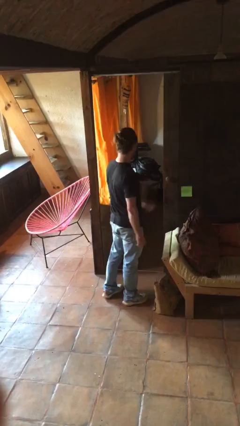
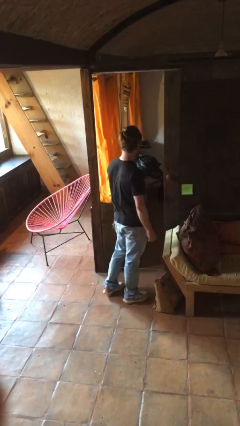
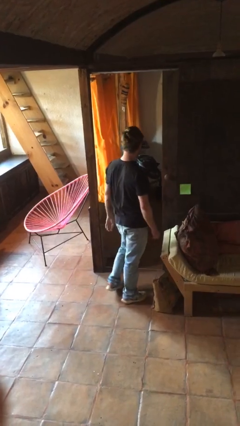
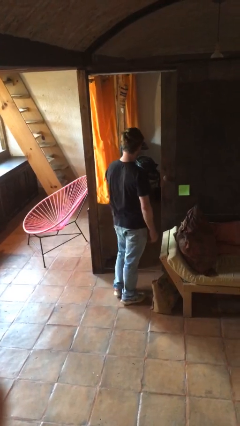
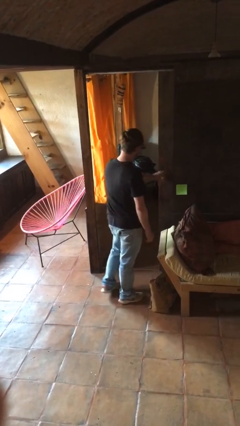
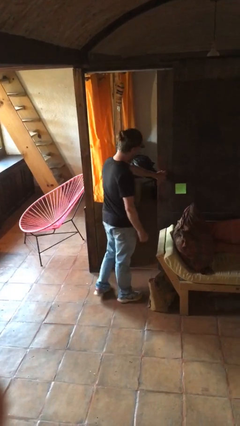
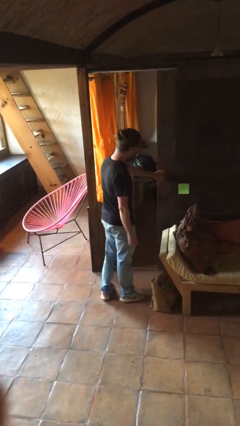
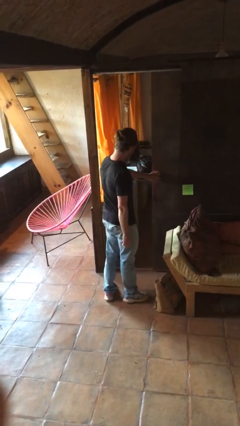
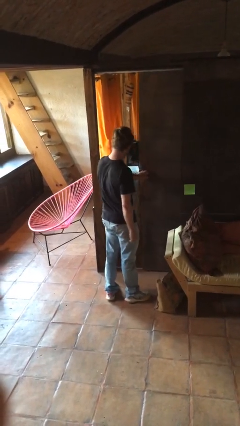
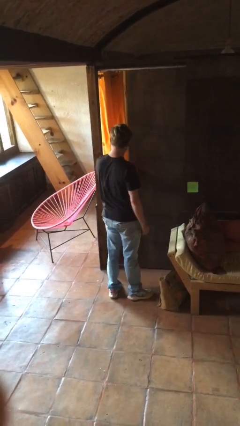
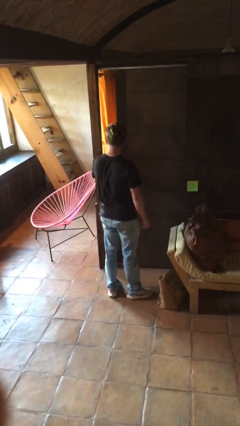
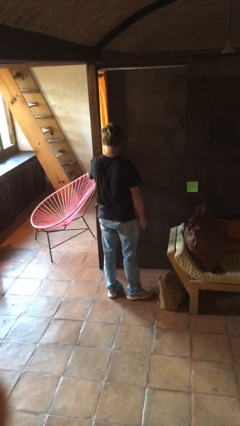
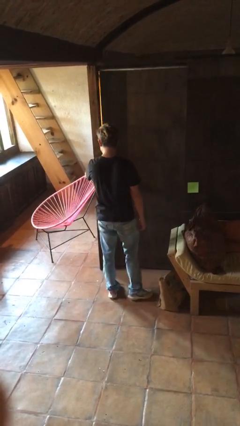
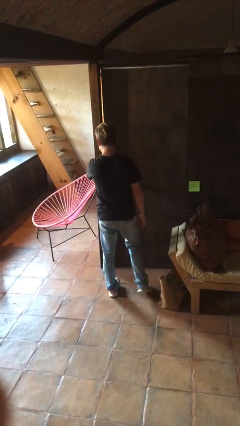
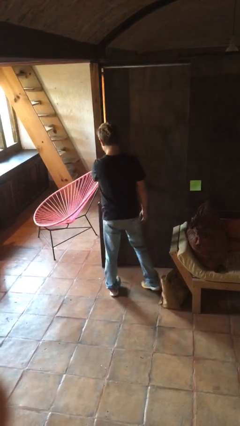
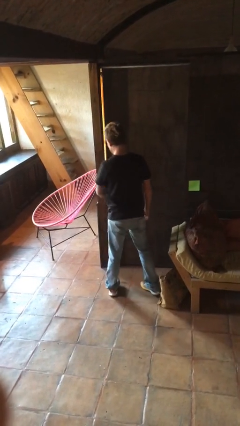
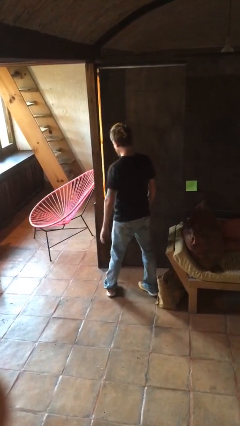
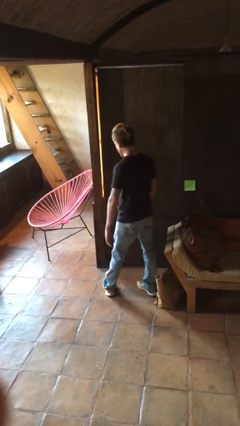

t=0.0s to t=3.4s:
person closes sliding door

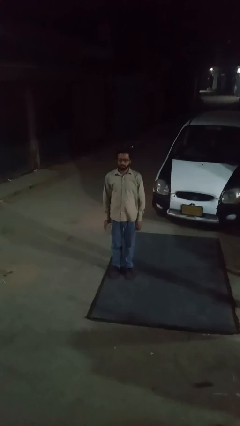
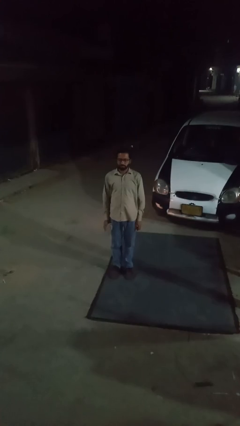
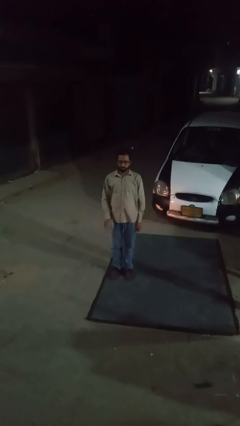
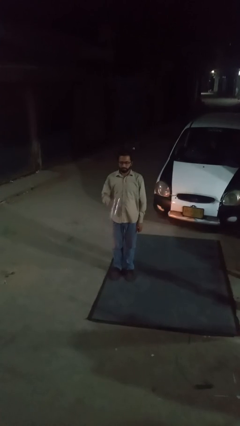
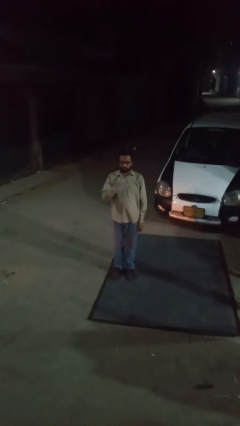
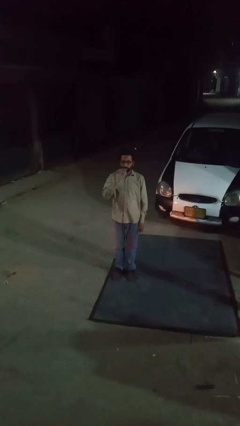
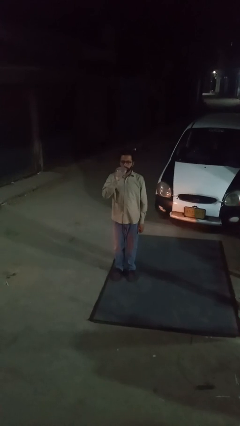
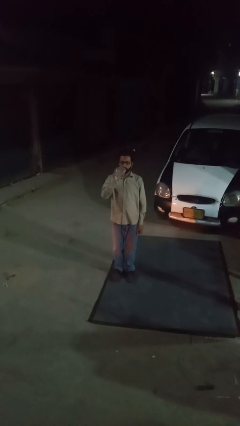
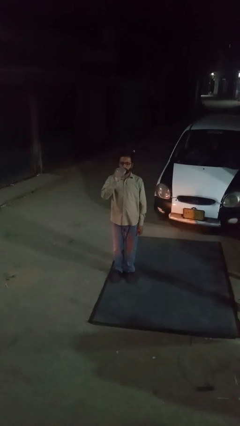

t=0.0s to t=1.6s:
person drinks from bottle

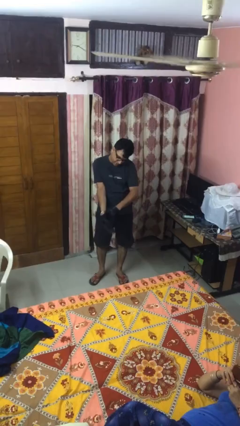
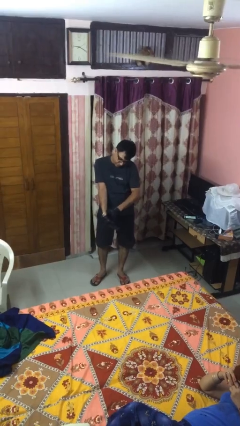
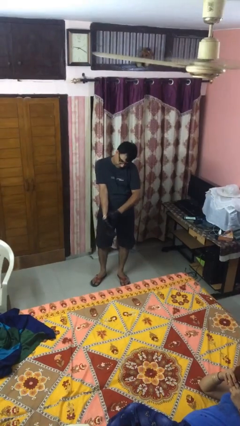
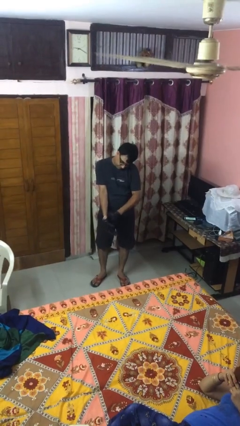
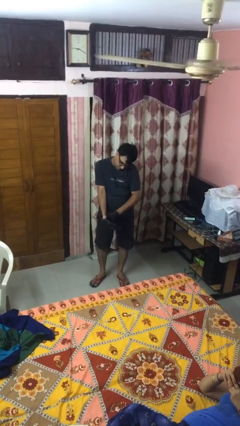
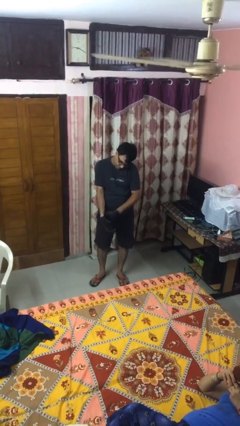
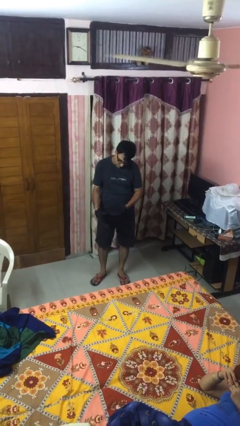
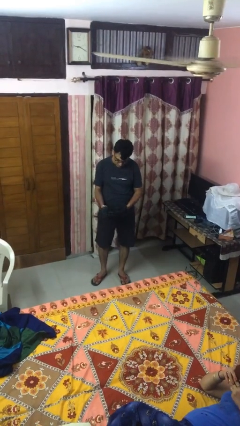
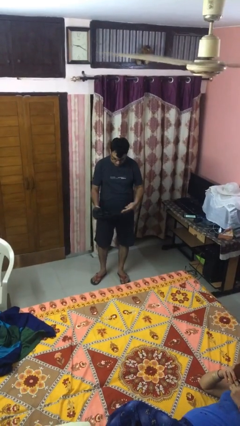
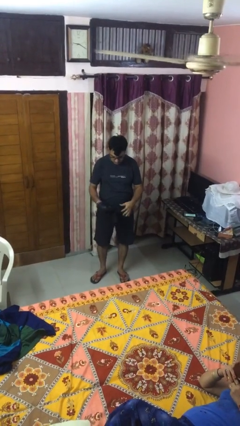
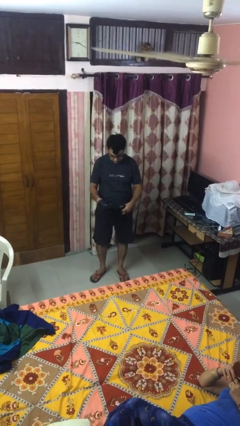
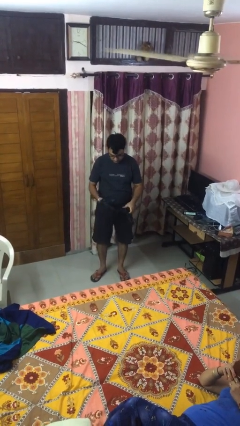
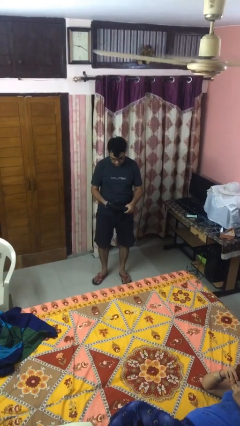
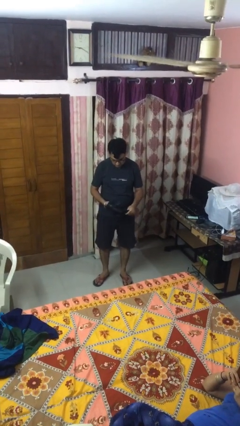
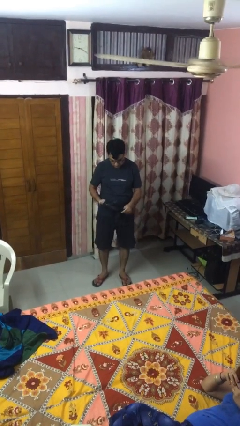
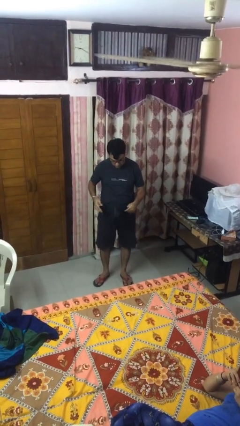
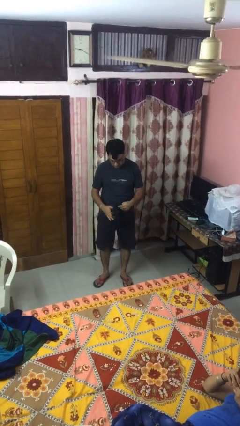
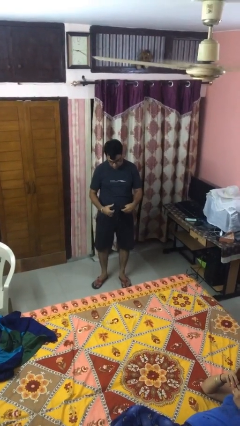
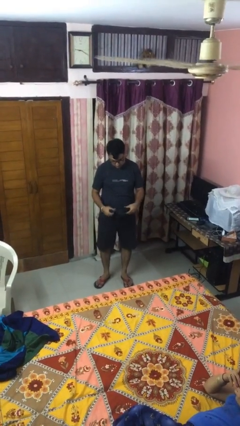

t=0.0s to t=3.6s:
person takes off gloves

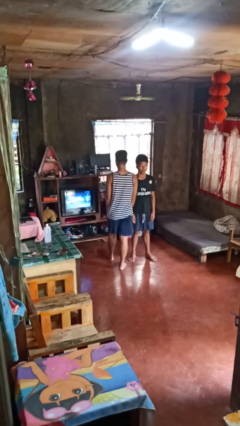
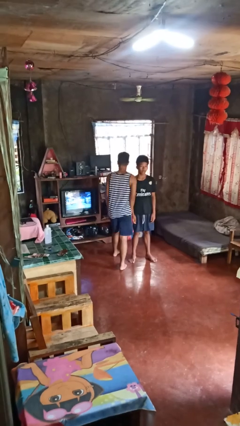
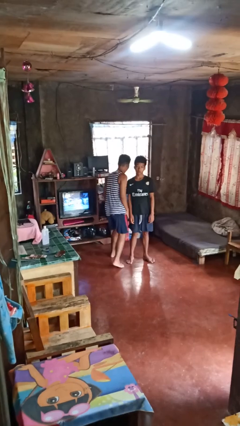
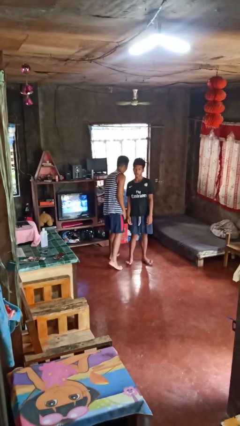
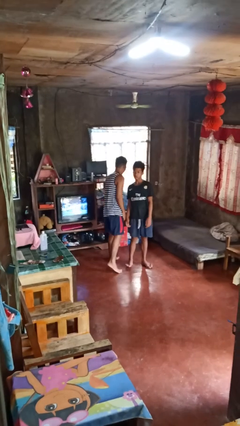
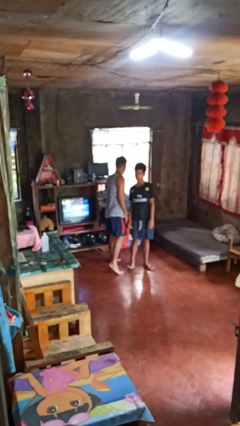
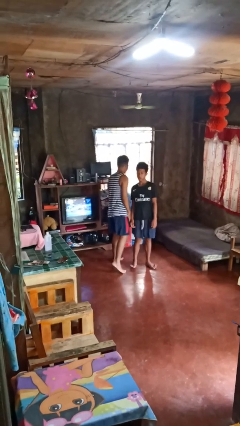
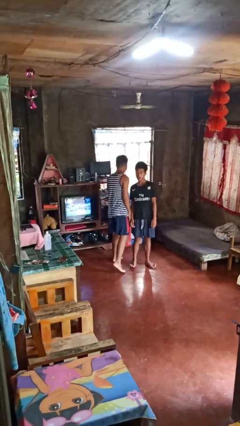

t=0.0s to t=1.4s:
person bumps into person

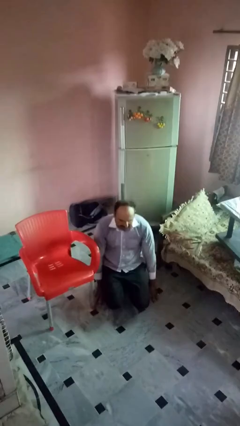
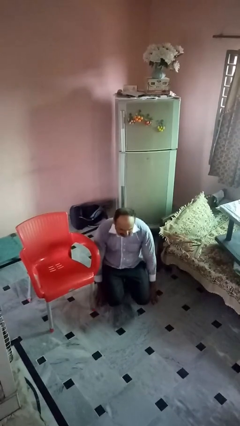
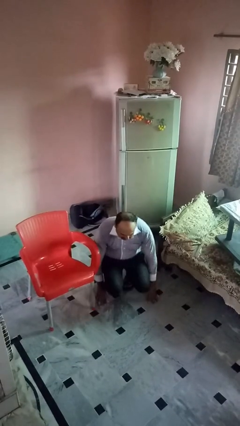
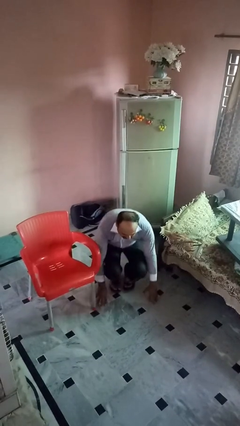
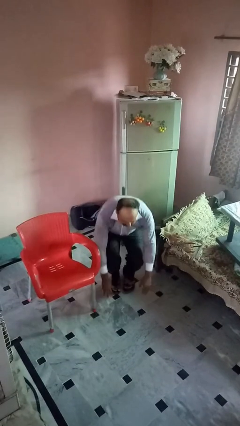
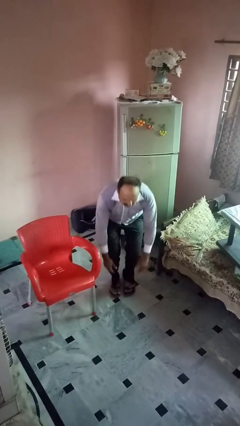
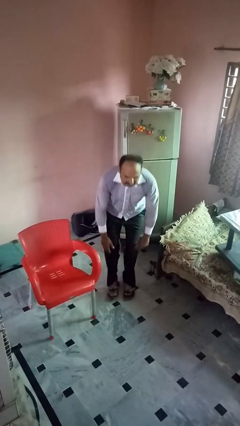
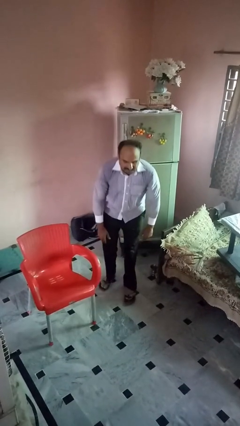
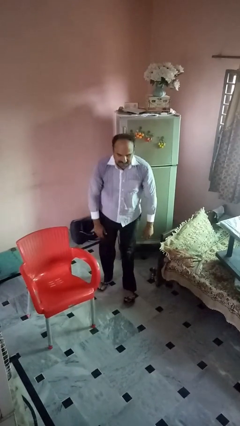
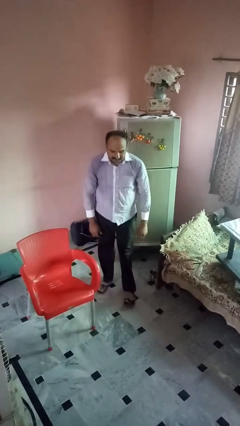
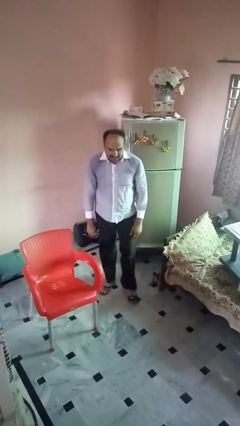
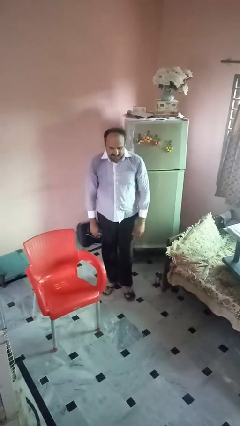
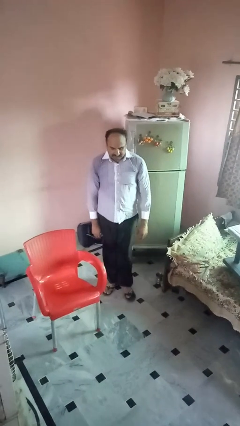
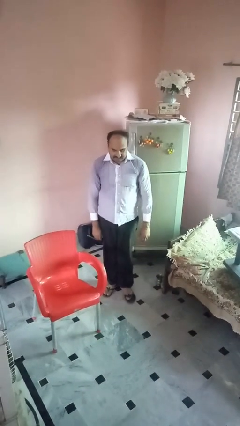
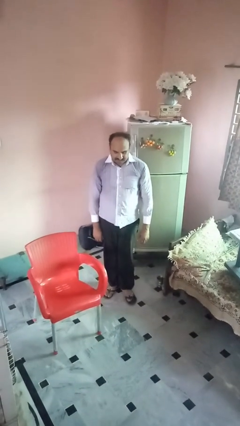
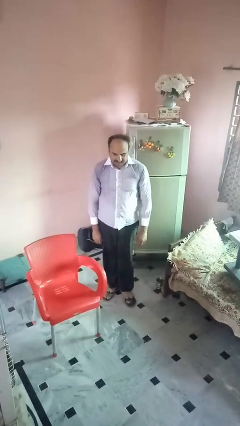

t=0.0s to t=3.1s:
person stands up from floor

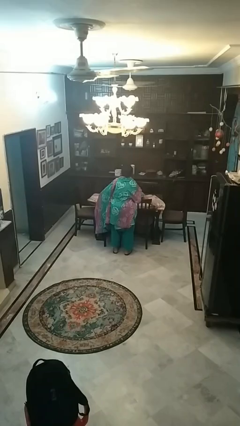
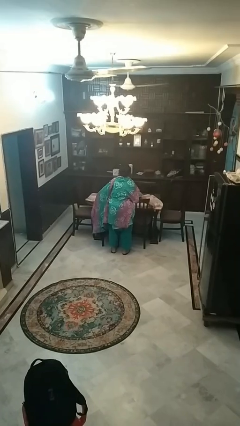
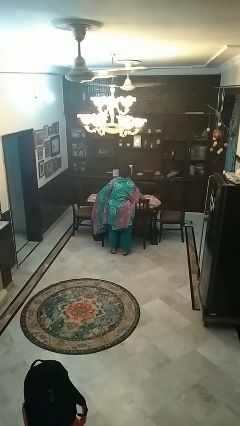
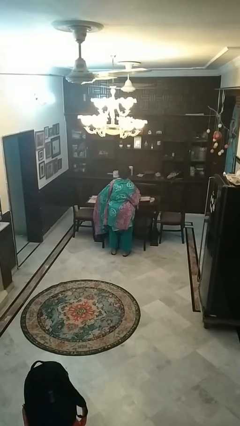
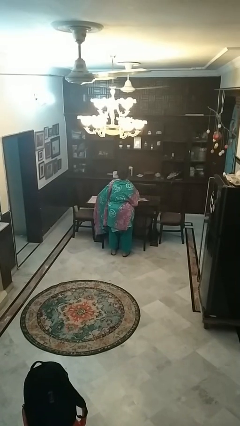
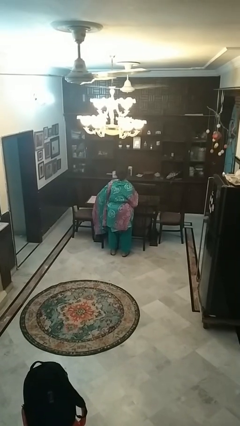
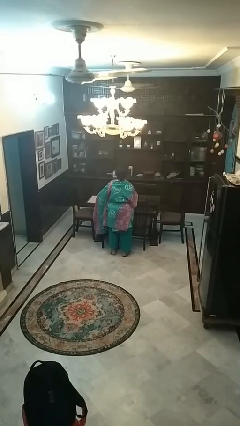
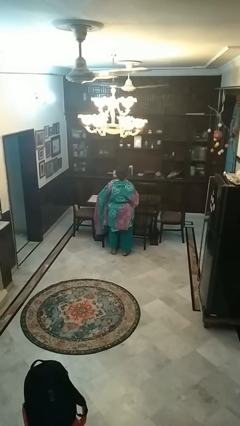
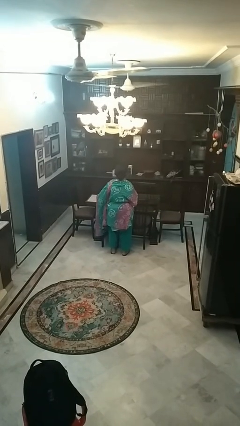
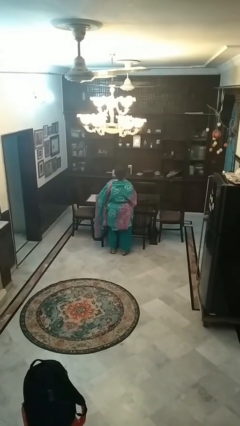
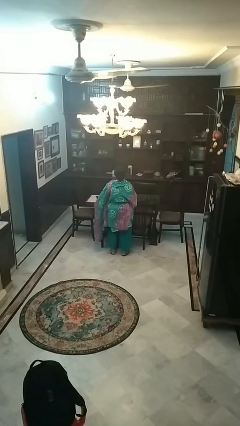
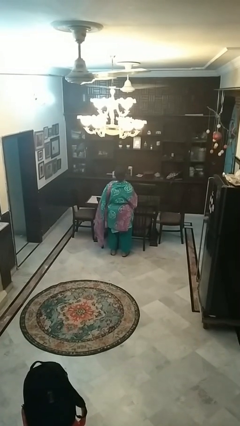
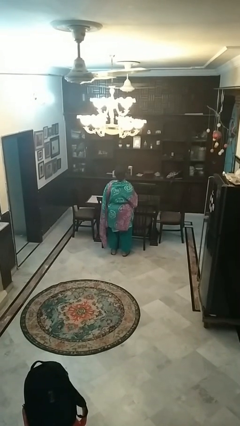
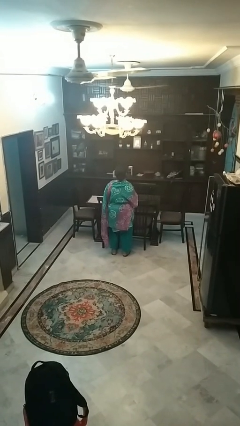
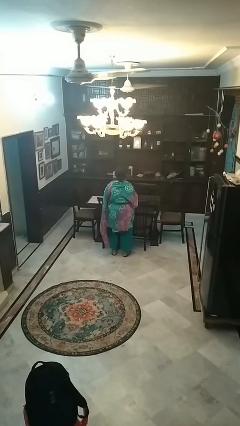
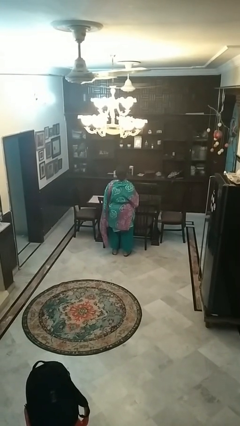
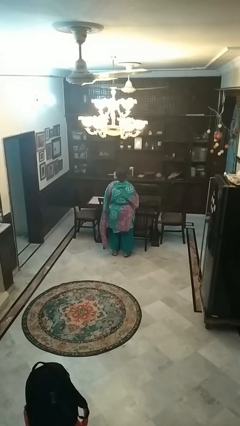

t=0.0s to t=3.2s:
person folds tablecloth

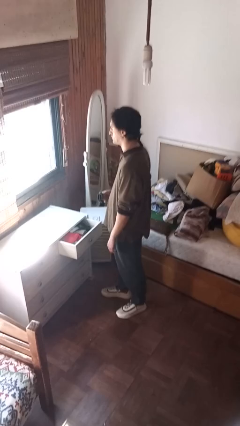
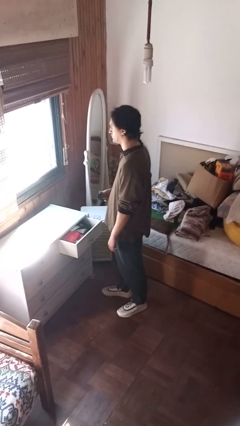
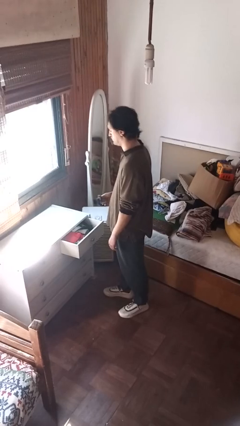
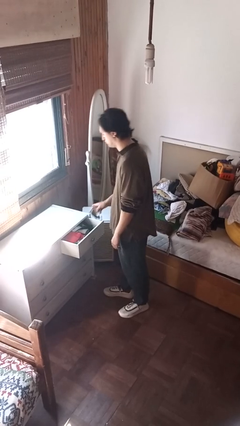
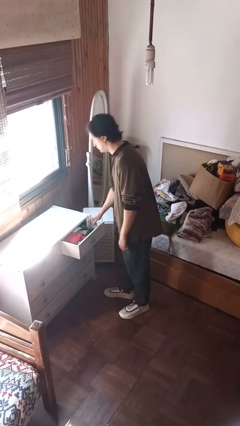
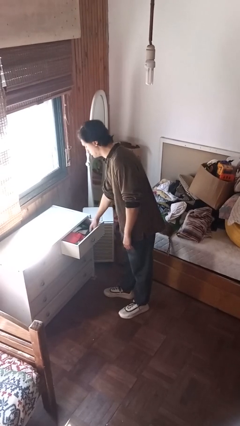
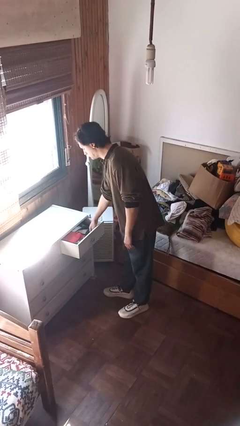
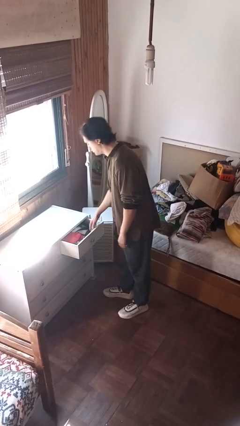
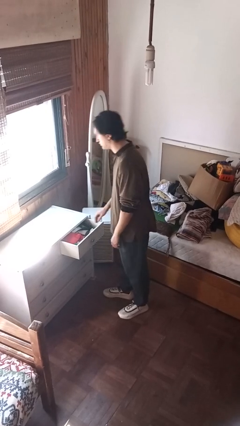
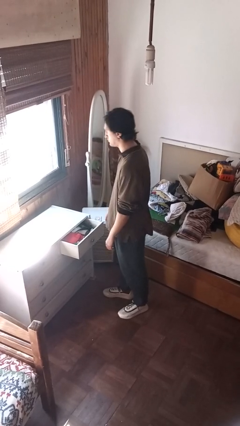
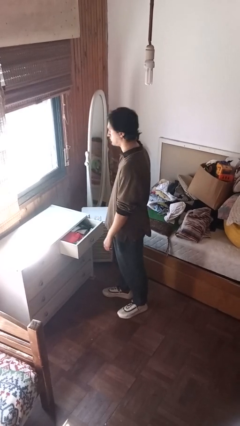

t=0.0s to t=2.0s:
person puts clothes into dresser
